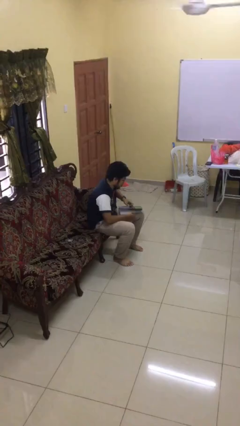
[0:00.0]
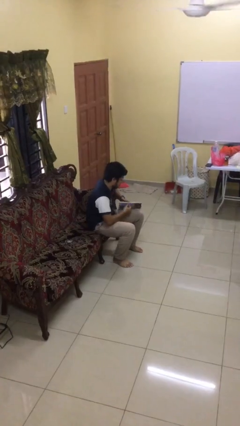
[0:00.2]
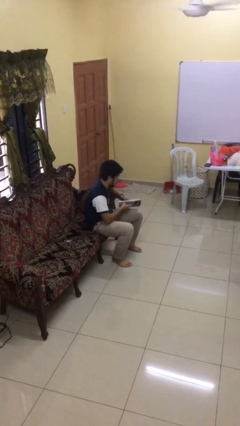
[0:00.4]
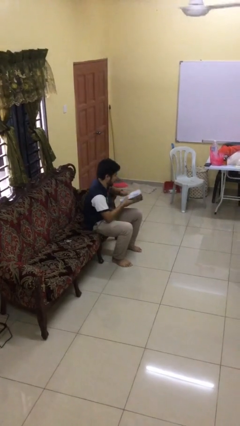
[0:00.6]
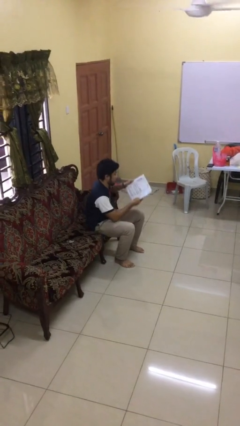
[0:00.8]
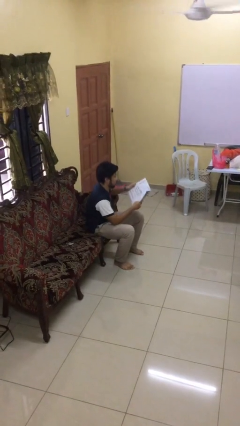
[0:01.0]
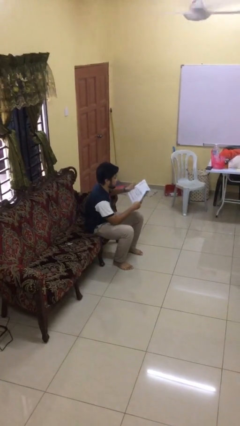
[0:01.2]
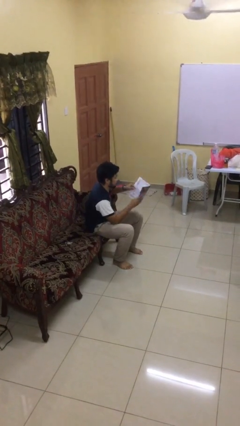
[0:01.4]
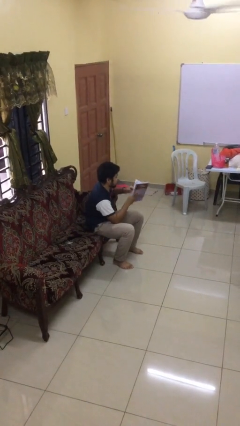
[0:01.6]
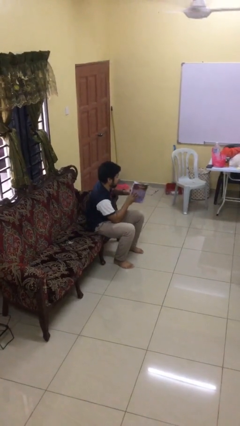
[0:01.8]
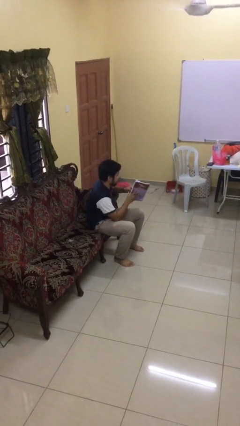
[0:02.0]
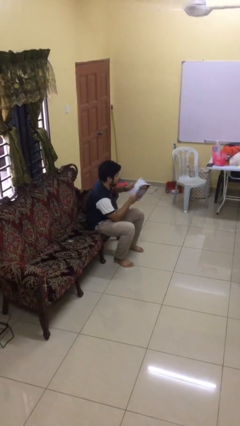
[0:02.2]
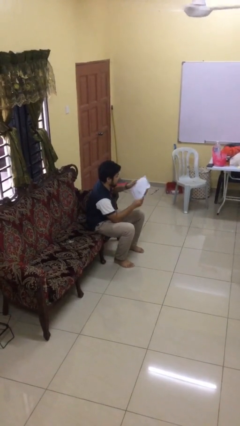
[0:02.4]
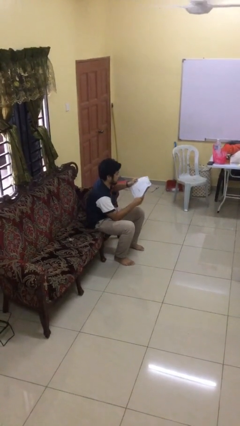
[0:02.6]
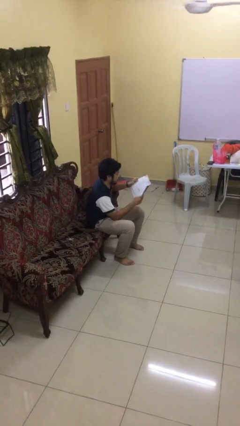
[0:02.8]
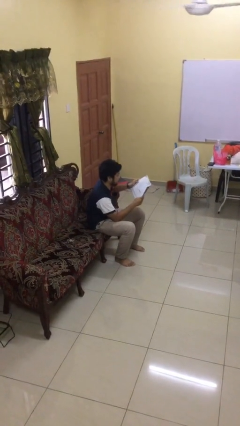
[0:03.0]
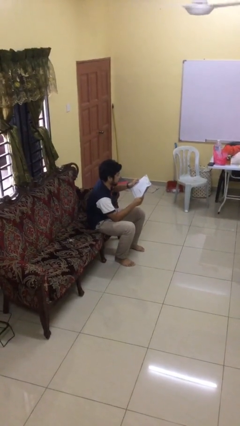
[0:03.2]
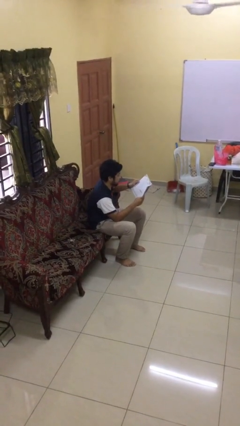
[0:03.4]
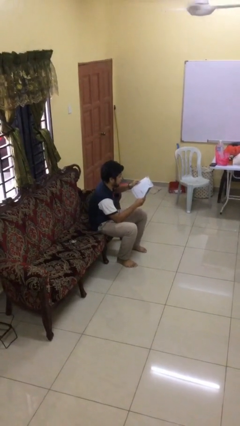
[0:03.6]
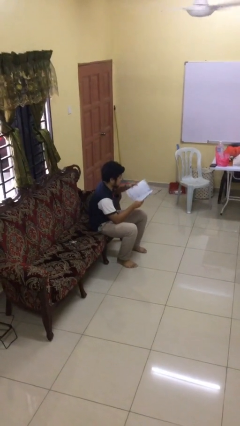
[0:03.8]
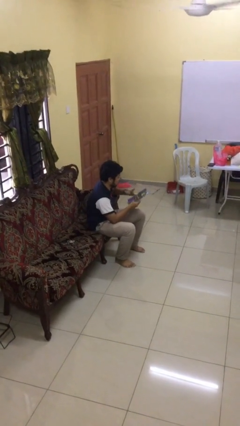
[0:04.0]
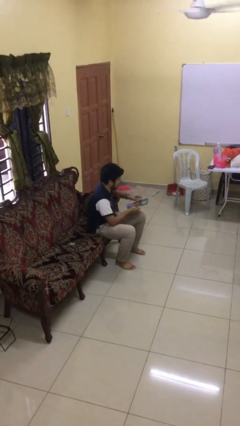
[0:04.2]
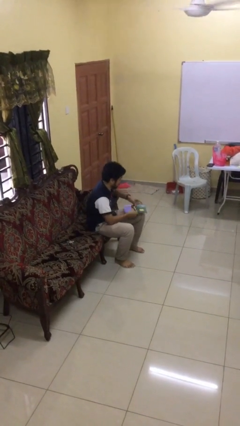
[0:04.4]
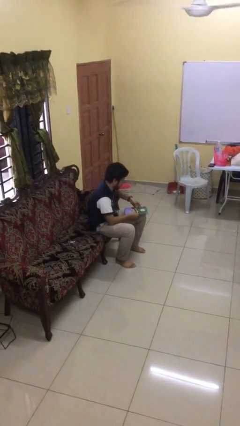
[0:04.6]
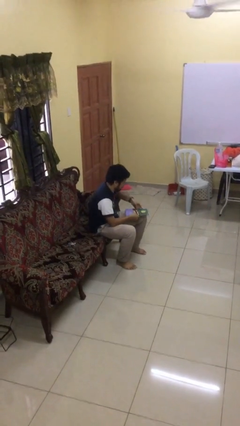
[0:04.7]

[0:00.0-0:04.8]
person reads magazine

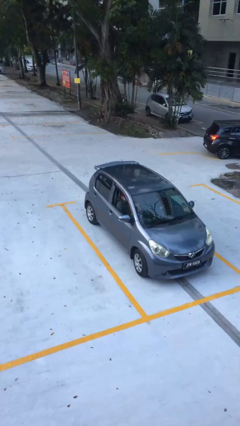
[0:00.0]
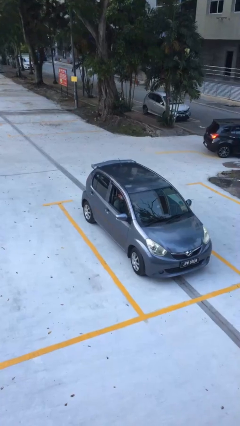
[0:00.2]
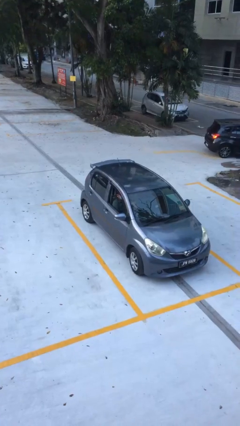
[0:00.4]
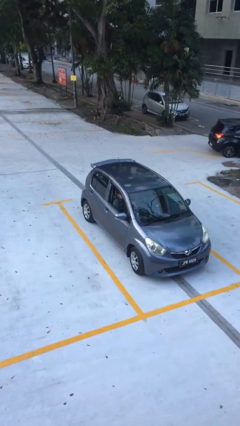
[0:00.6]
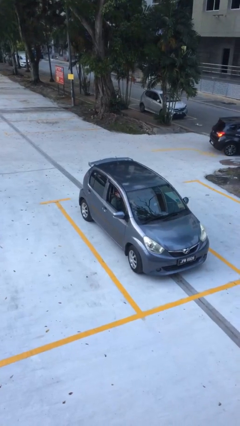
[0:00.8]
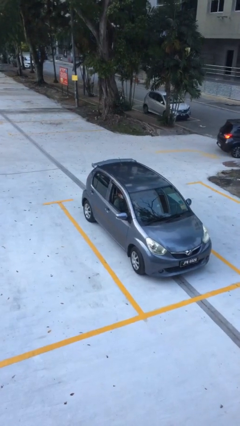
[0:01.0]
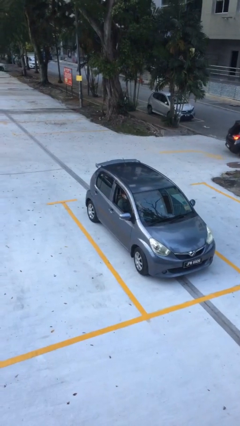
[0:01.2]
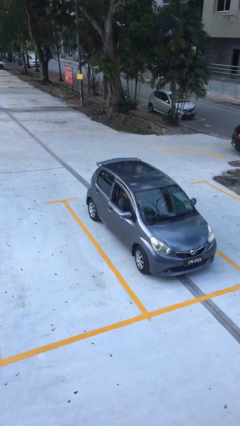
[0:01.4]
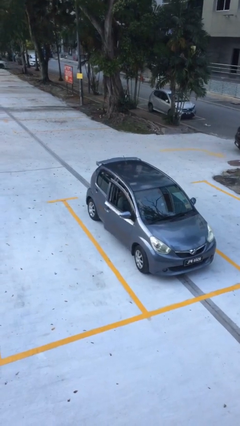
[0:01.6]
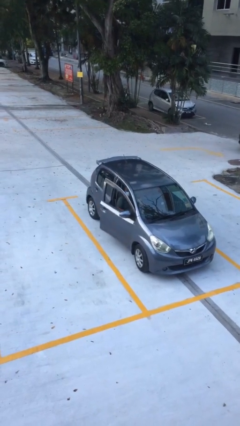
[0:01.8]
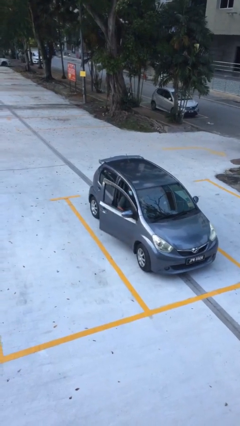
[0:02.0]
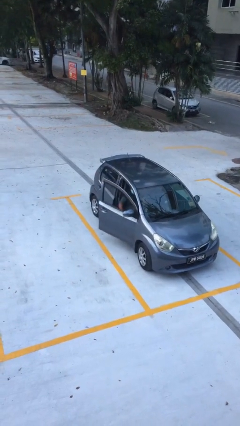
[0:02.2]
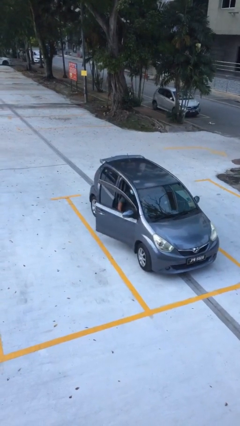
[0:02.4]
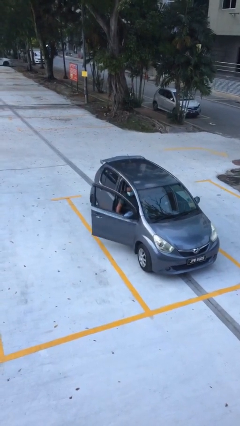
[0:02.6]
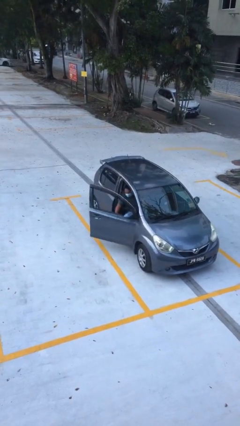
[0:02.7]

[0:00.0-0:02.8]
person opens car door

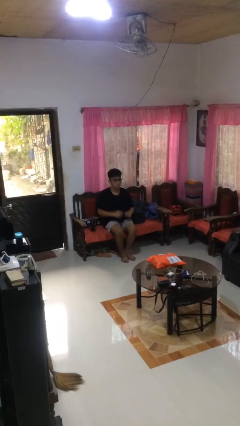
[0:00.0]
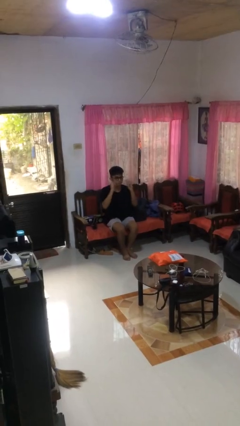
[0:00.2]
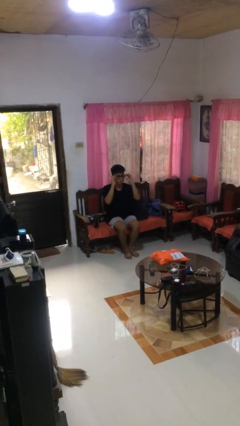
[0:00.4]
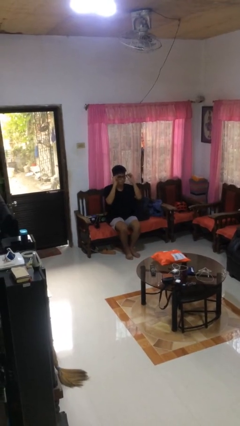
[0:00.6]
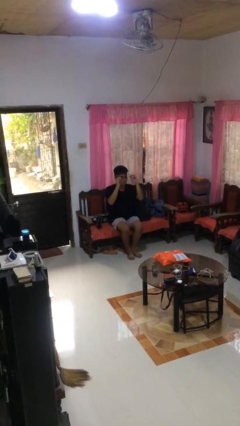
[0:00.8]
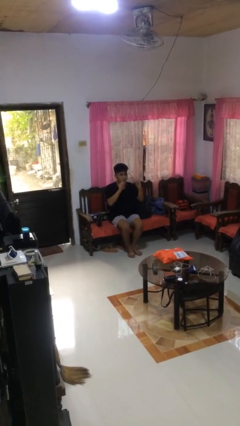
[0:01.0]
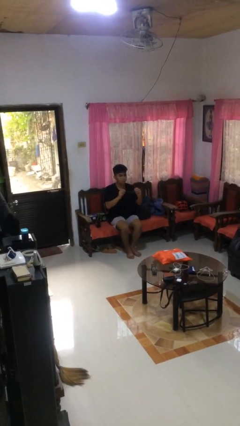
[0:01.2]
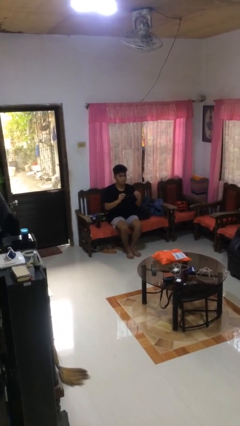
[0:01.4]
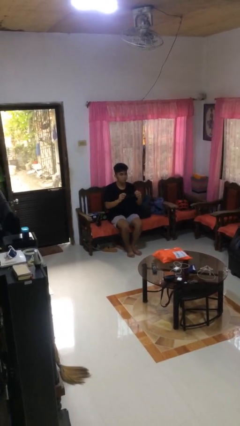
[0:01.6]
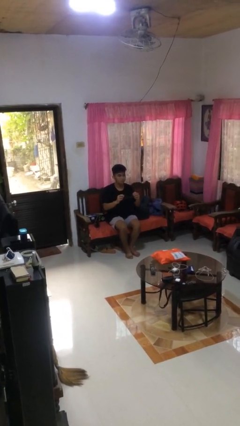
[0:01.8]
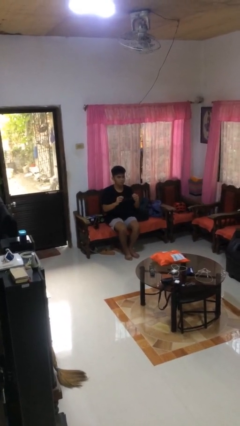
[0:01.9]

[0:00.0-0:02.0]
person takes off glasses

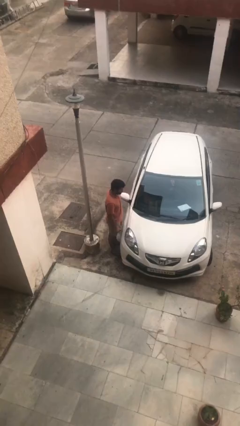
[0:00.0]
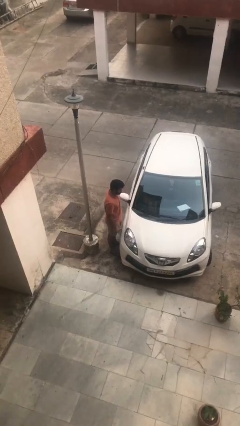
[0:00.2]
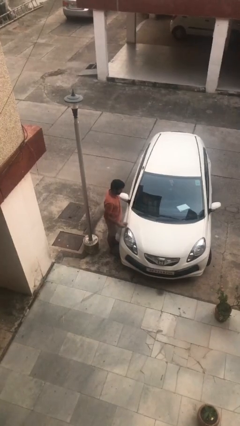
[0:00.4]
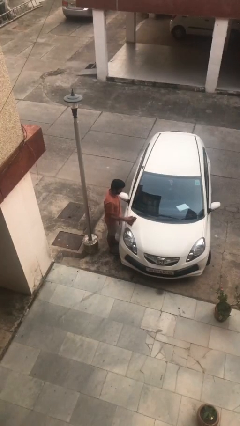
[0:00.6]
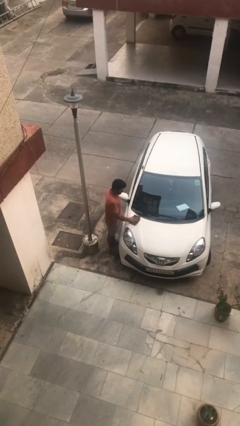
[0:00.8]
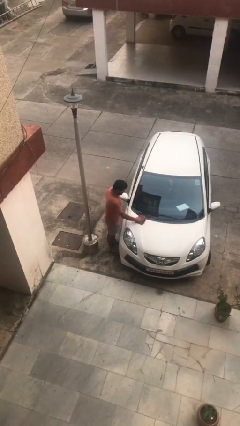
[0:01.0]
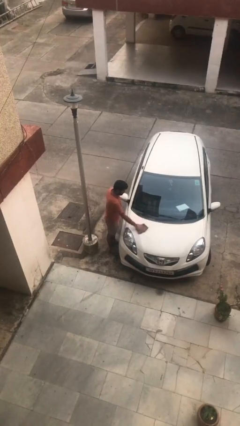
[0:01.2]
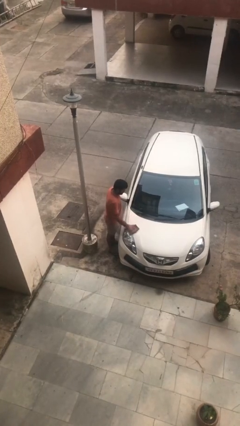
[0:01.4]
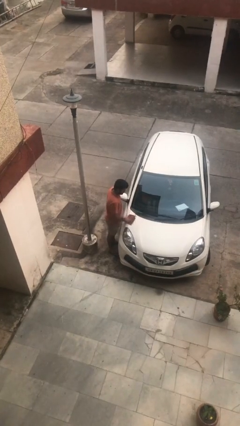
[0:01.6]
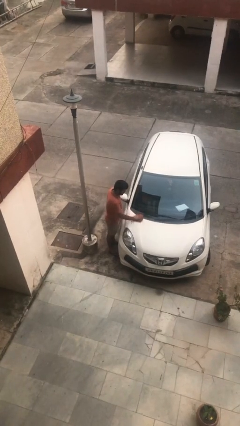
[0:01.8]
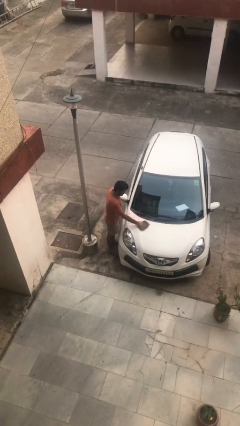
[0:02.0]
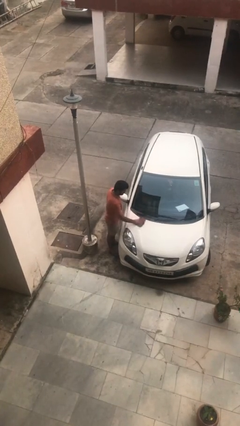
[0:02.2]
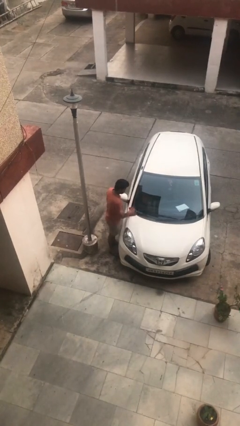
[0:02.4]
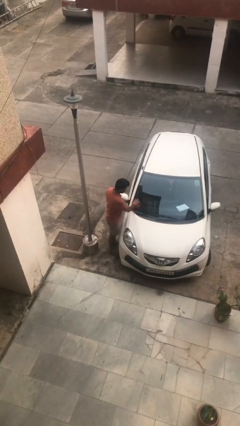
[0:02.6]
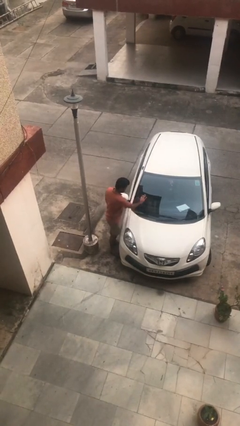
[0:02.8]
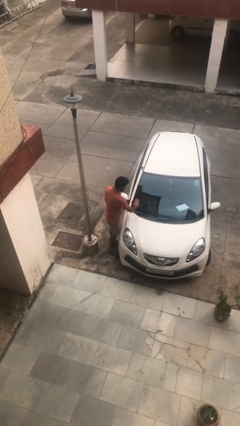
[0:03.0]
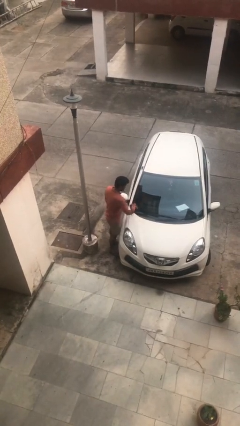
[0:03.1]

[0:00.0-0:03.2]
person polishes car with rag

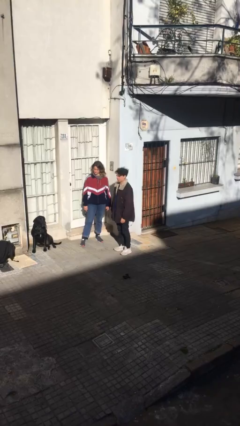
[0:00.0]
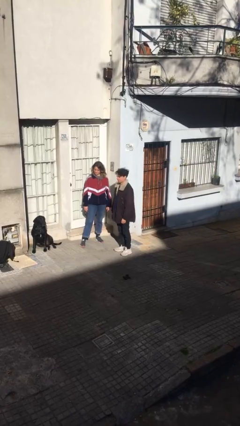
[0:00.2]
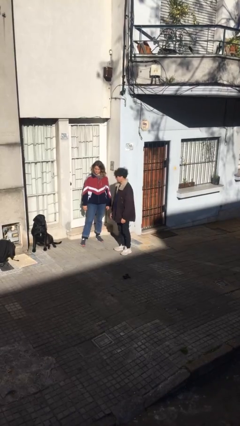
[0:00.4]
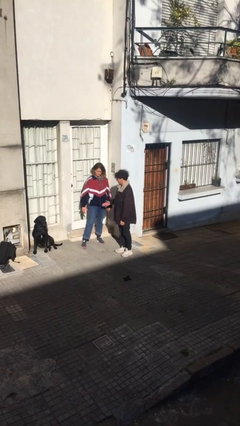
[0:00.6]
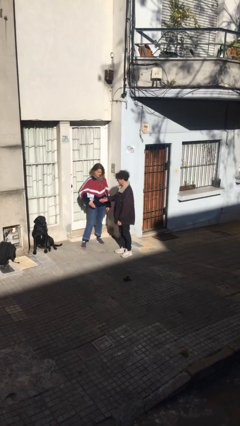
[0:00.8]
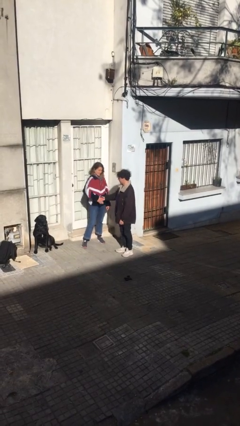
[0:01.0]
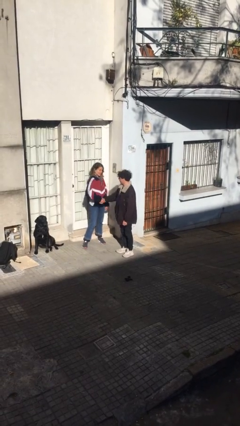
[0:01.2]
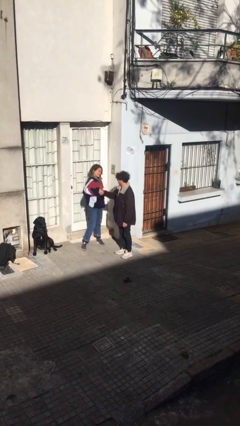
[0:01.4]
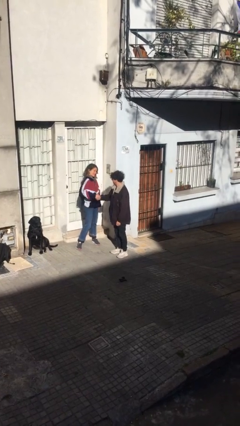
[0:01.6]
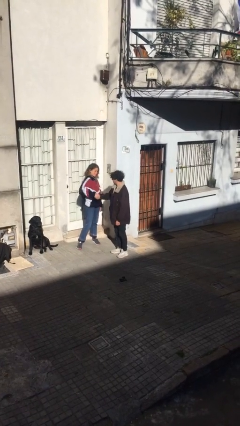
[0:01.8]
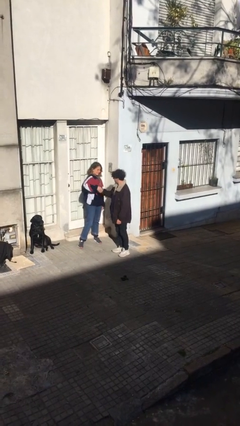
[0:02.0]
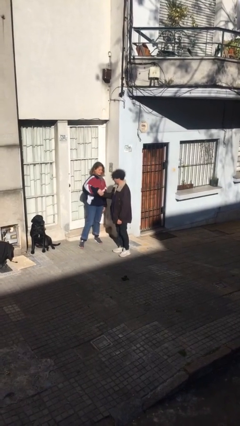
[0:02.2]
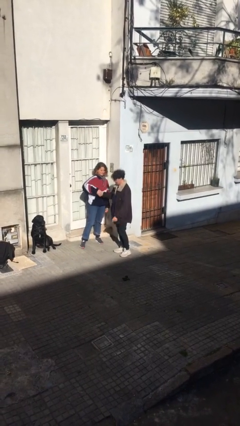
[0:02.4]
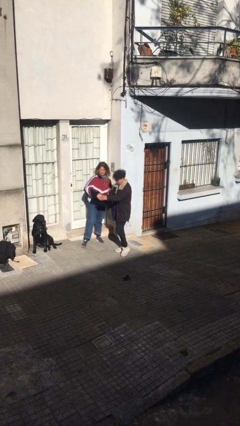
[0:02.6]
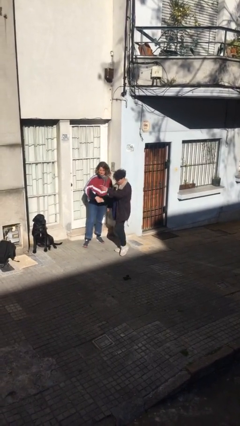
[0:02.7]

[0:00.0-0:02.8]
person shakes hand

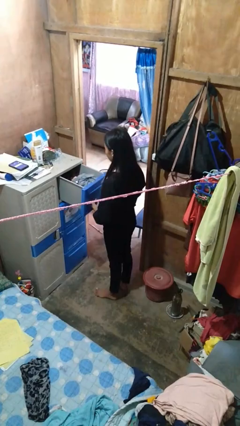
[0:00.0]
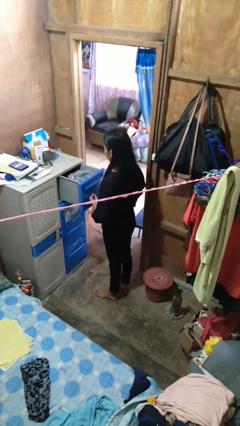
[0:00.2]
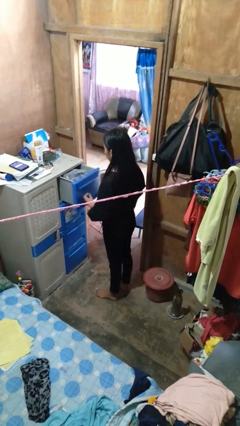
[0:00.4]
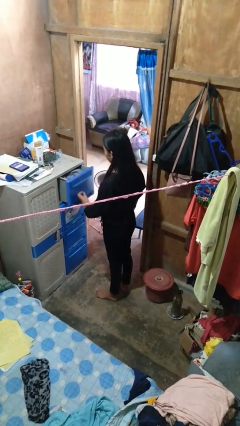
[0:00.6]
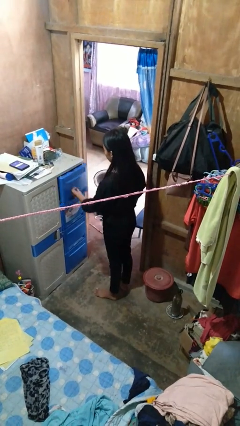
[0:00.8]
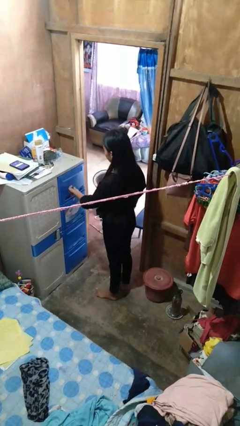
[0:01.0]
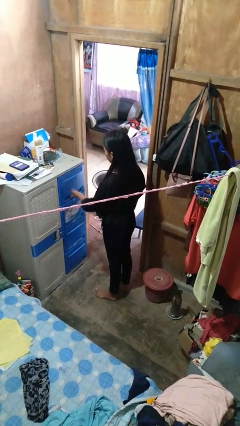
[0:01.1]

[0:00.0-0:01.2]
person closes dresser drawer

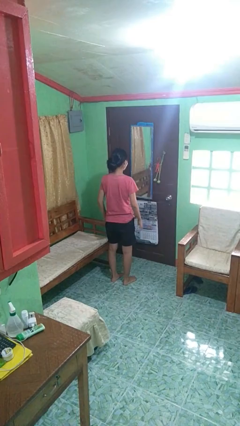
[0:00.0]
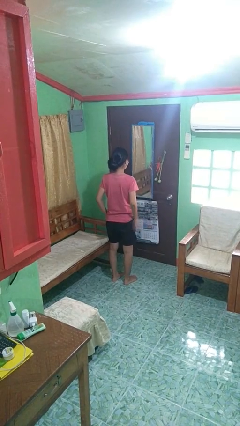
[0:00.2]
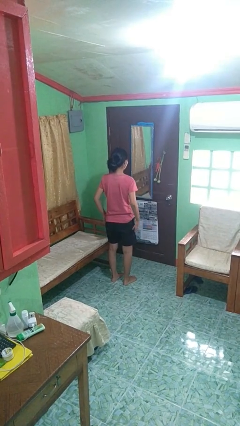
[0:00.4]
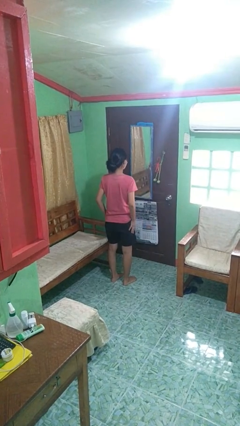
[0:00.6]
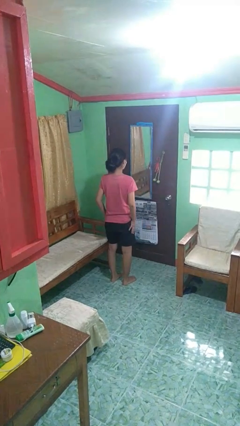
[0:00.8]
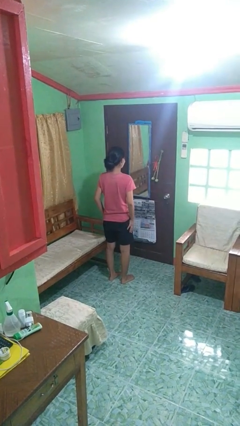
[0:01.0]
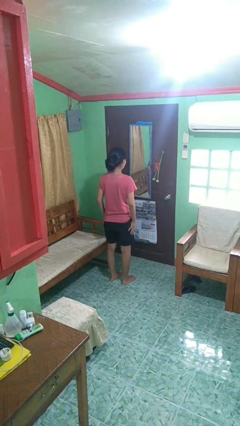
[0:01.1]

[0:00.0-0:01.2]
person slaps hands on thighs
